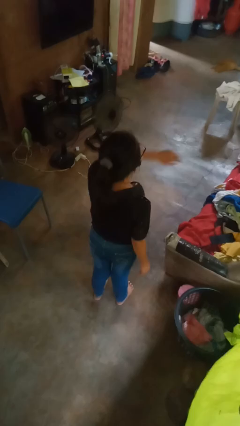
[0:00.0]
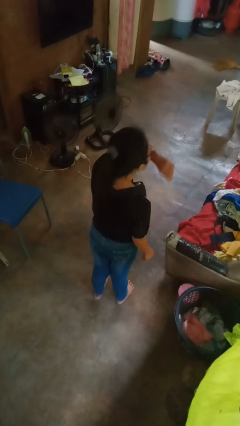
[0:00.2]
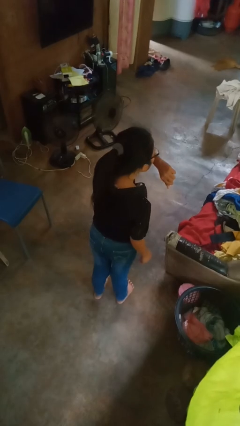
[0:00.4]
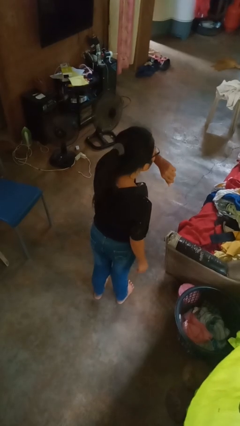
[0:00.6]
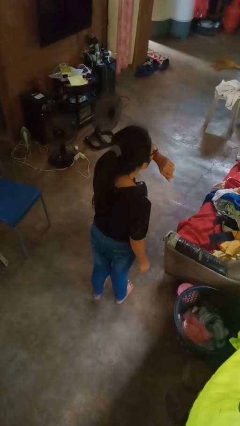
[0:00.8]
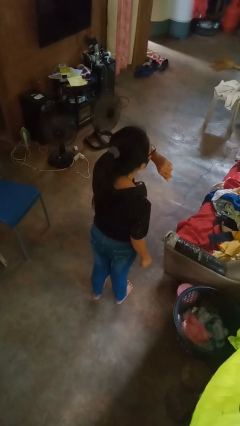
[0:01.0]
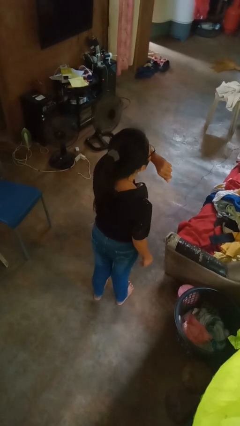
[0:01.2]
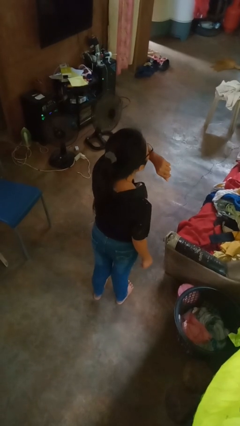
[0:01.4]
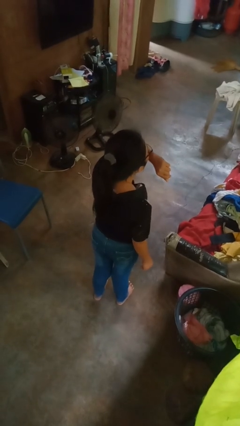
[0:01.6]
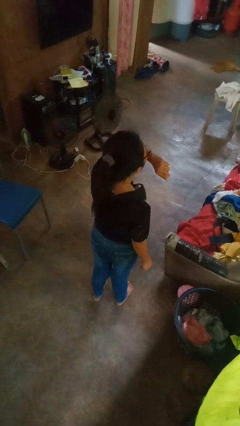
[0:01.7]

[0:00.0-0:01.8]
person sneezes into arm

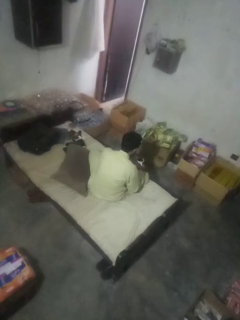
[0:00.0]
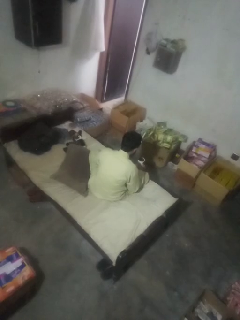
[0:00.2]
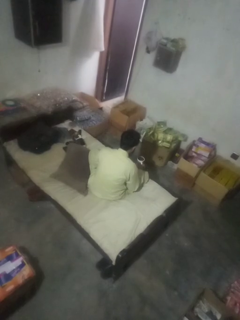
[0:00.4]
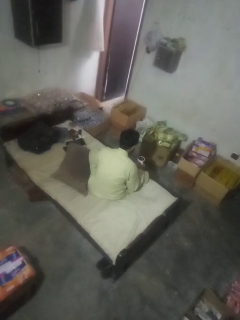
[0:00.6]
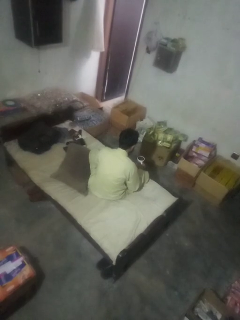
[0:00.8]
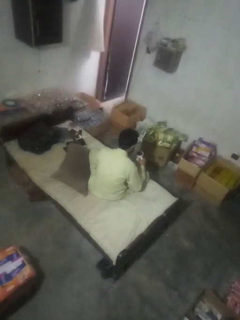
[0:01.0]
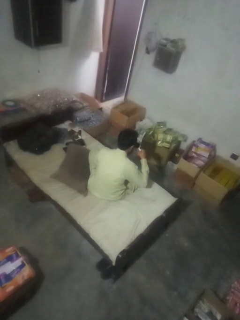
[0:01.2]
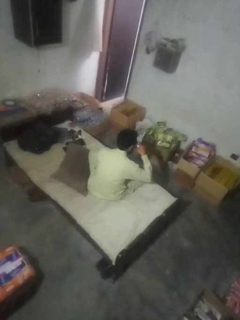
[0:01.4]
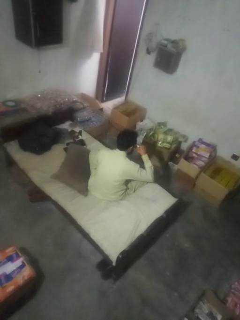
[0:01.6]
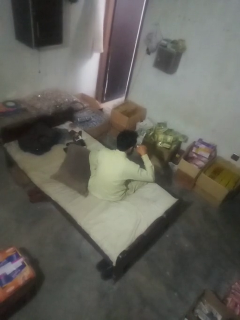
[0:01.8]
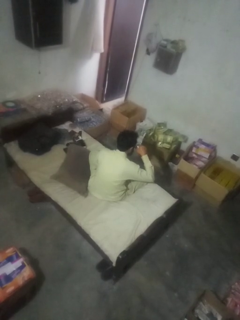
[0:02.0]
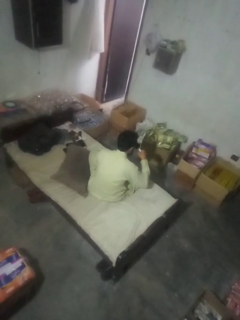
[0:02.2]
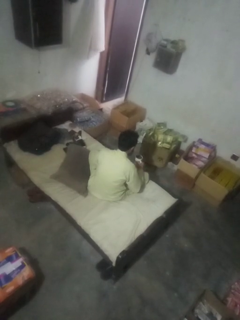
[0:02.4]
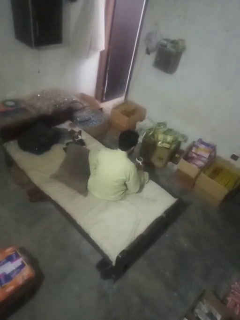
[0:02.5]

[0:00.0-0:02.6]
person drinks from mug

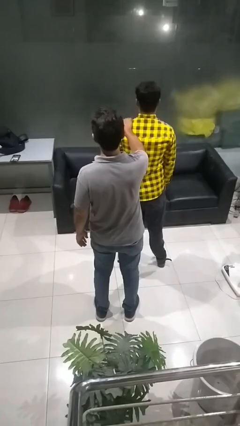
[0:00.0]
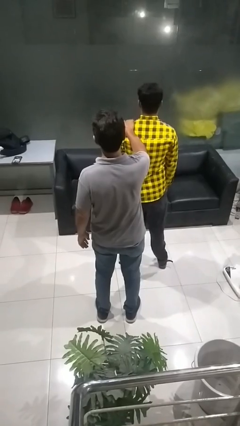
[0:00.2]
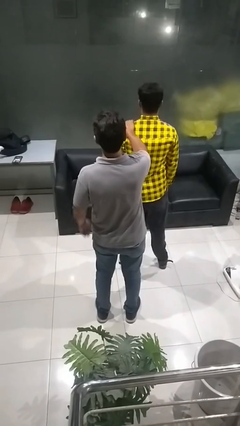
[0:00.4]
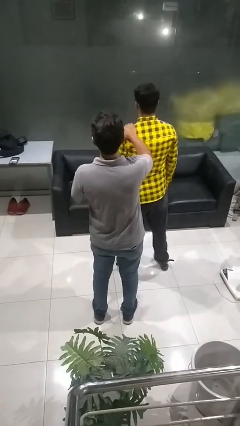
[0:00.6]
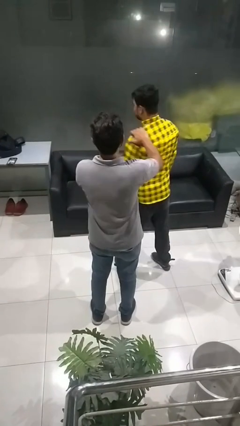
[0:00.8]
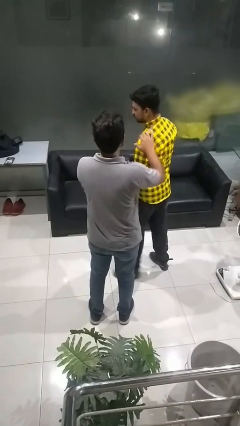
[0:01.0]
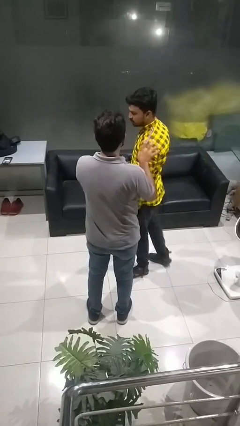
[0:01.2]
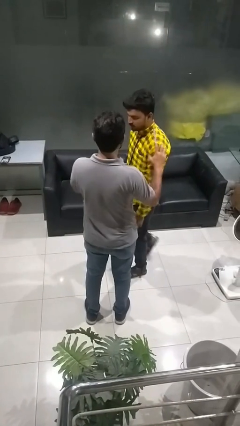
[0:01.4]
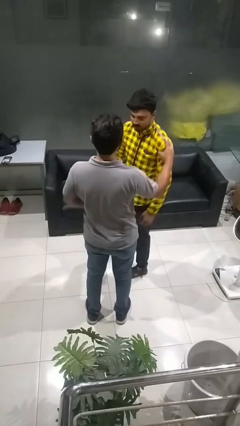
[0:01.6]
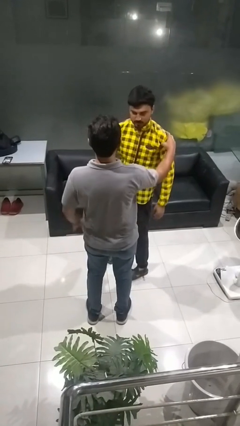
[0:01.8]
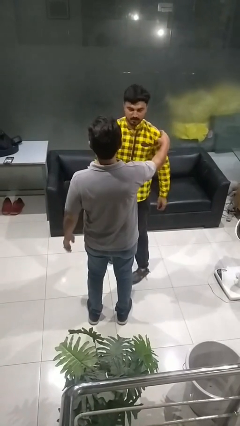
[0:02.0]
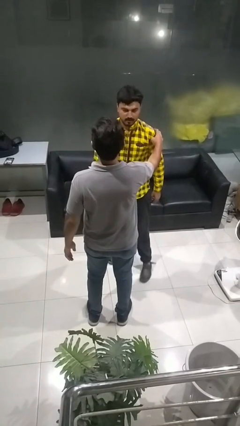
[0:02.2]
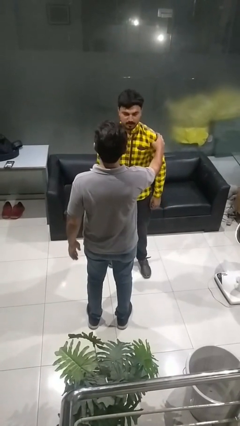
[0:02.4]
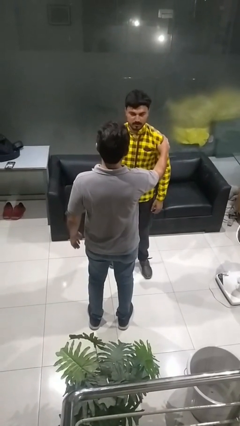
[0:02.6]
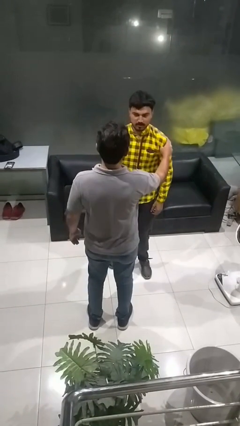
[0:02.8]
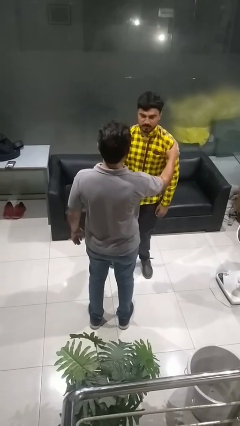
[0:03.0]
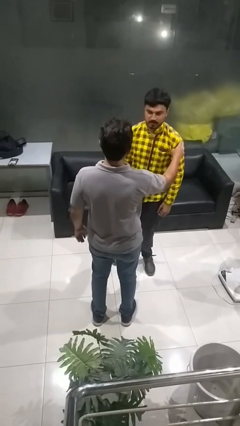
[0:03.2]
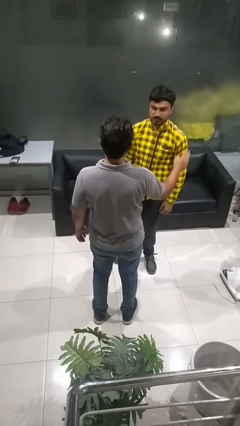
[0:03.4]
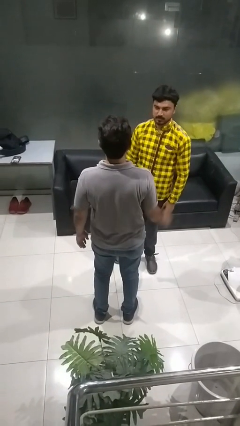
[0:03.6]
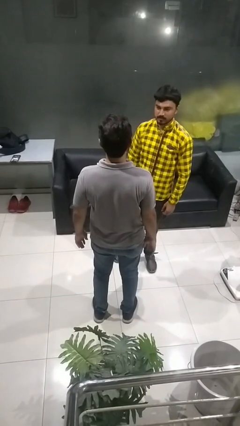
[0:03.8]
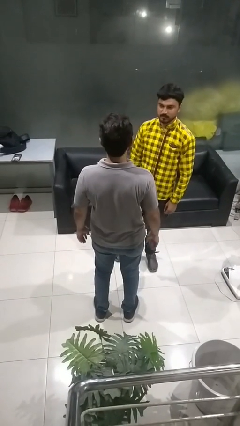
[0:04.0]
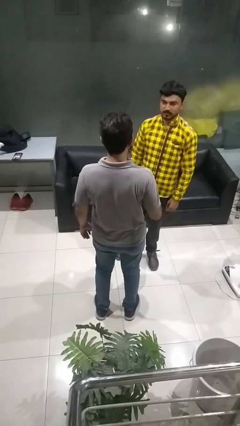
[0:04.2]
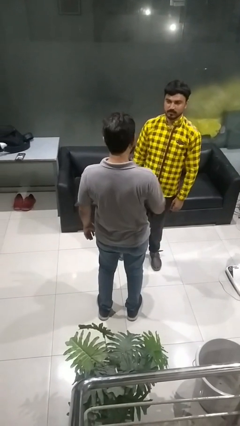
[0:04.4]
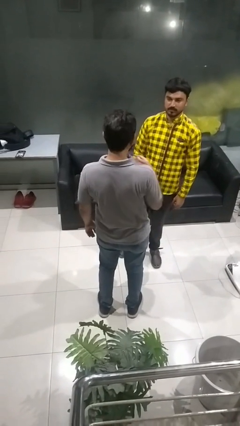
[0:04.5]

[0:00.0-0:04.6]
person spins person around

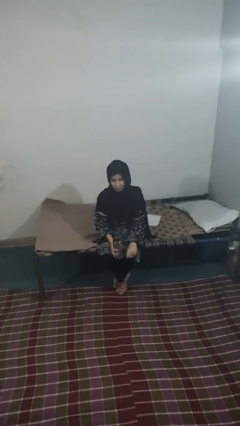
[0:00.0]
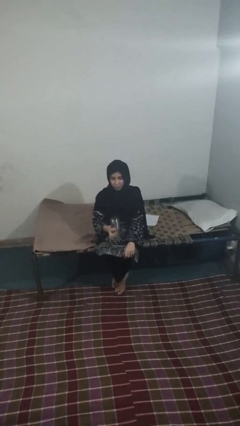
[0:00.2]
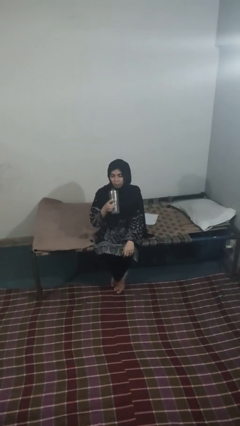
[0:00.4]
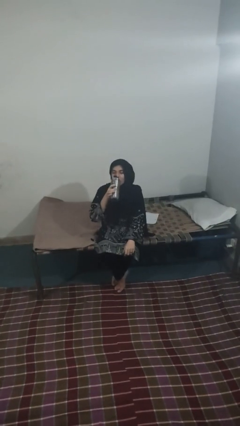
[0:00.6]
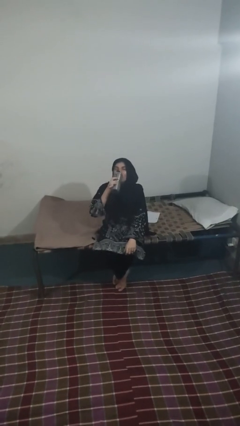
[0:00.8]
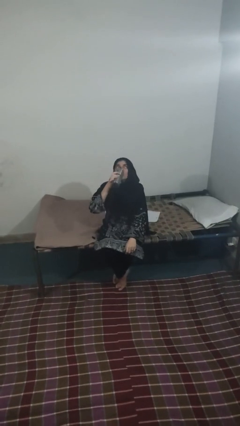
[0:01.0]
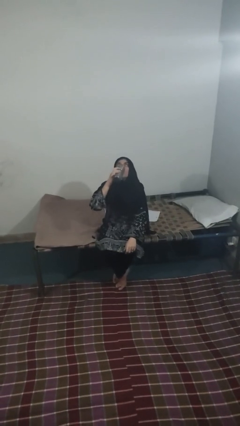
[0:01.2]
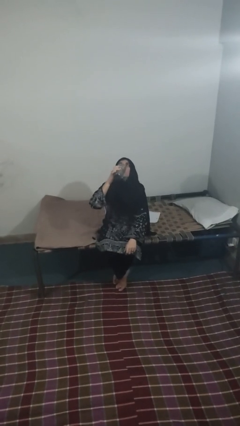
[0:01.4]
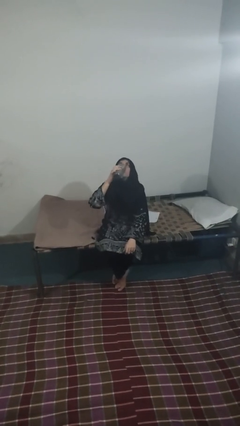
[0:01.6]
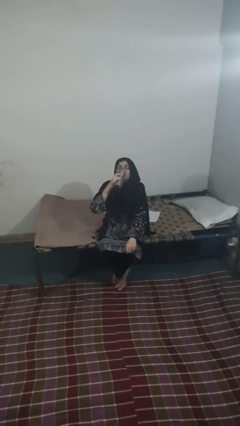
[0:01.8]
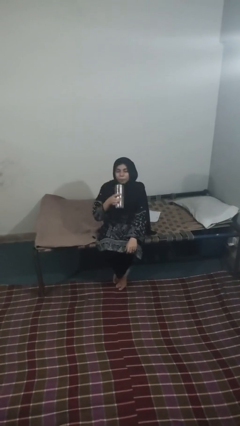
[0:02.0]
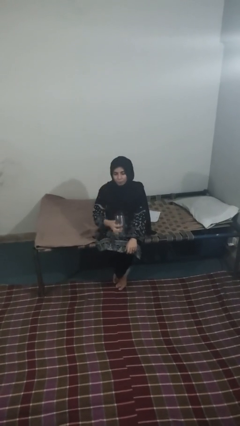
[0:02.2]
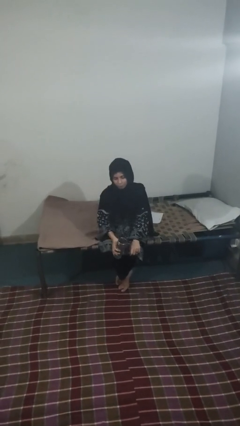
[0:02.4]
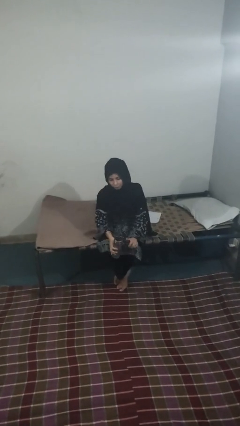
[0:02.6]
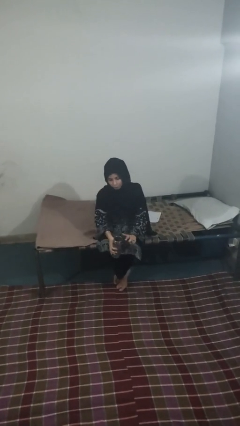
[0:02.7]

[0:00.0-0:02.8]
person drinks from beverage can

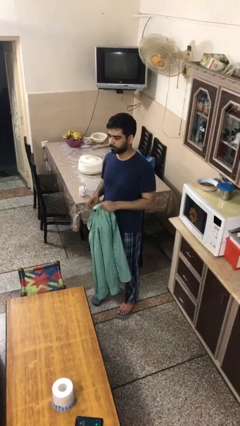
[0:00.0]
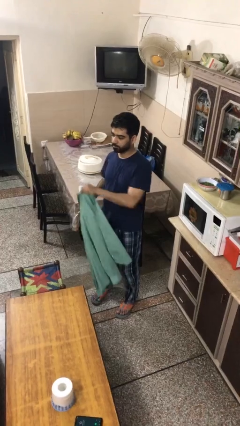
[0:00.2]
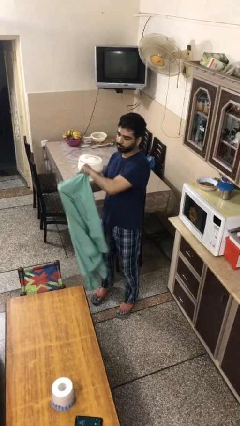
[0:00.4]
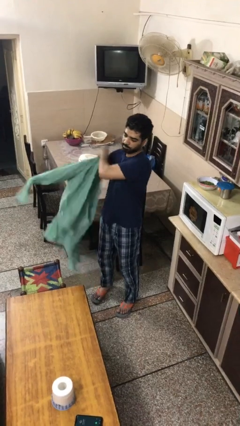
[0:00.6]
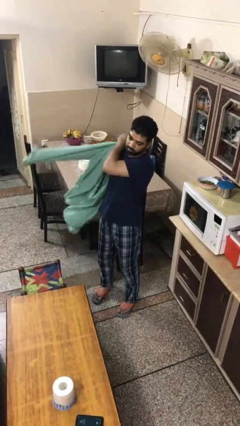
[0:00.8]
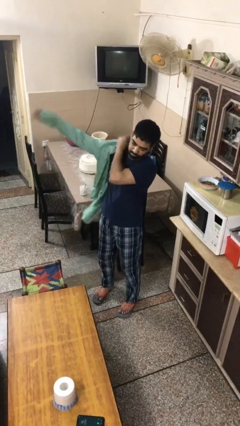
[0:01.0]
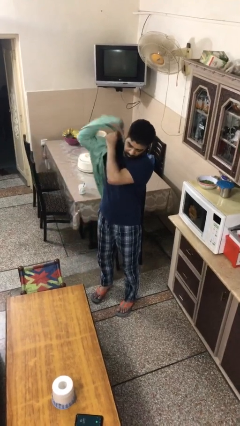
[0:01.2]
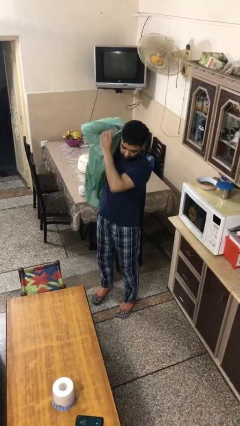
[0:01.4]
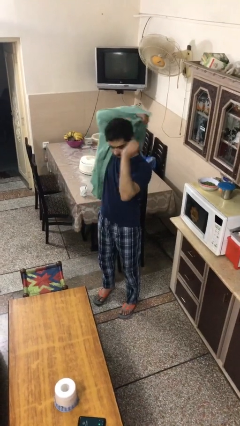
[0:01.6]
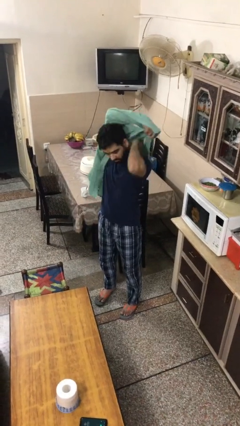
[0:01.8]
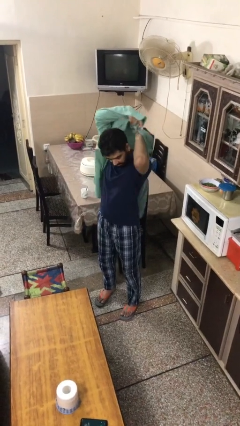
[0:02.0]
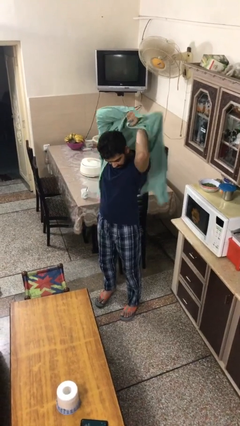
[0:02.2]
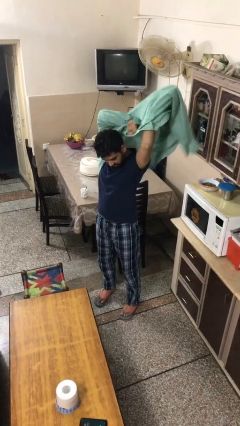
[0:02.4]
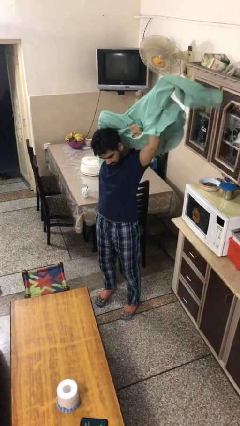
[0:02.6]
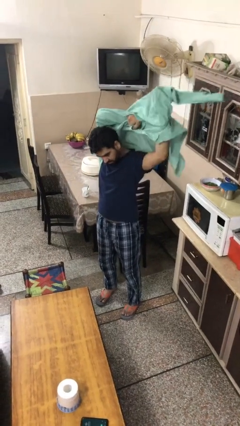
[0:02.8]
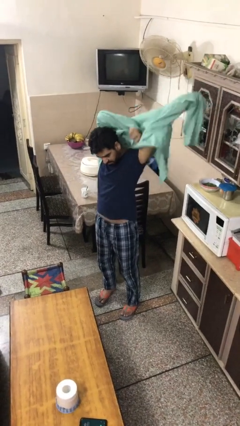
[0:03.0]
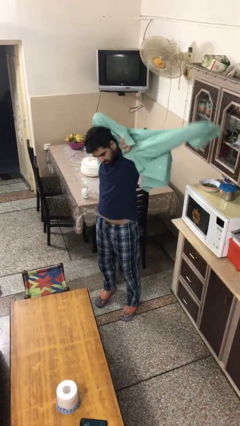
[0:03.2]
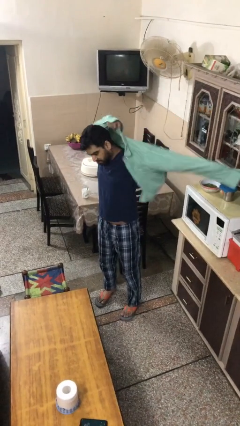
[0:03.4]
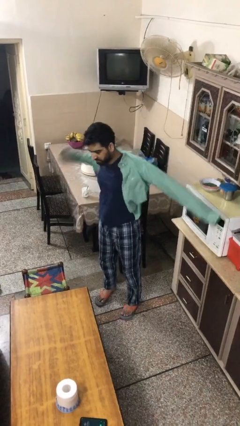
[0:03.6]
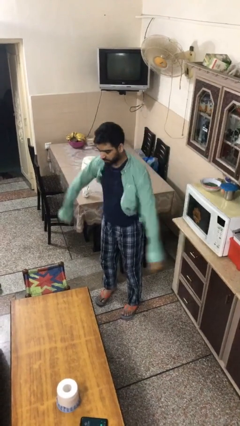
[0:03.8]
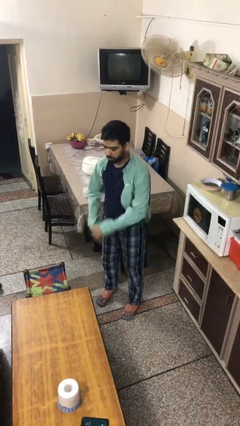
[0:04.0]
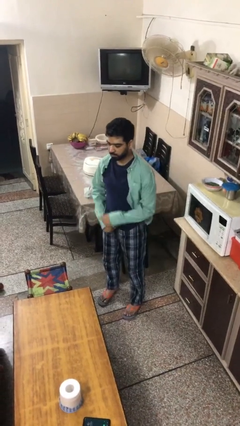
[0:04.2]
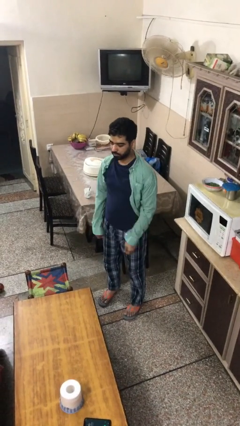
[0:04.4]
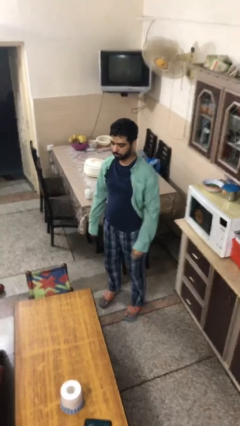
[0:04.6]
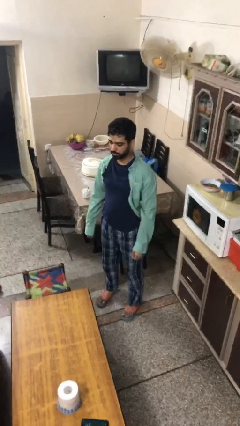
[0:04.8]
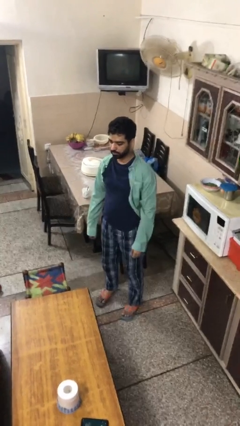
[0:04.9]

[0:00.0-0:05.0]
person puts on shirt

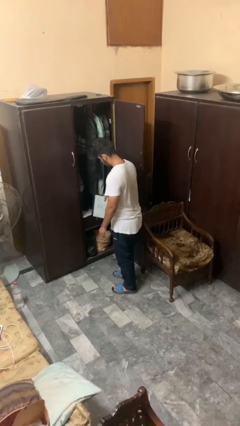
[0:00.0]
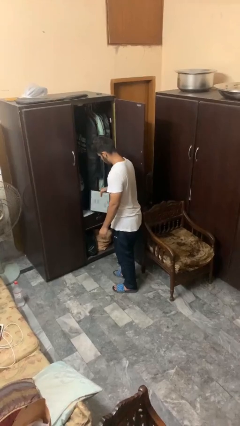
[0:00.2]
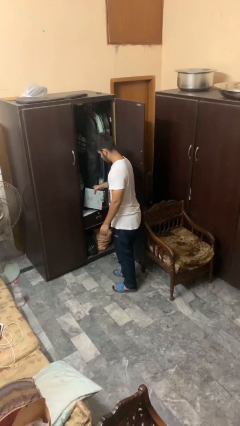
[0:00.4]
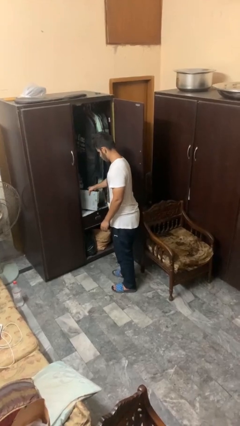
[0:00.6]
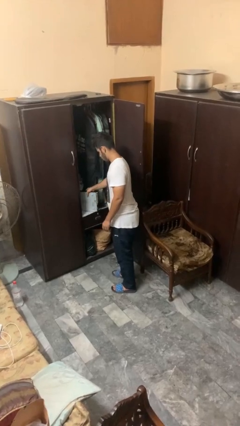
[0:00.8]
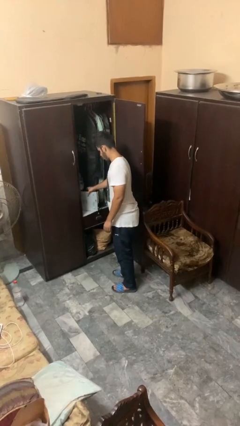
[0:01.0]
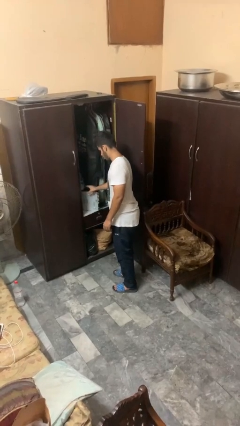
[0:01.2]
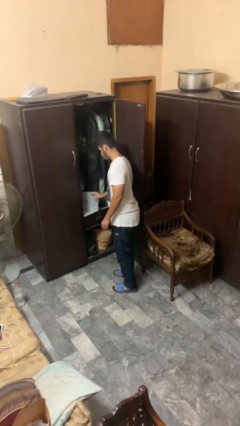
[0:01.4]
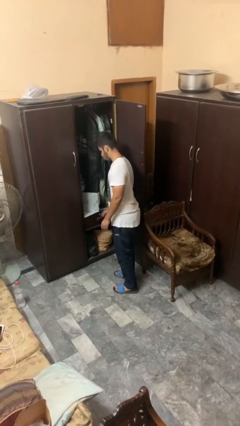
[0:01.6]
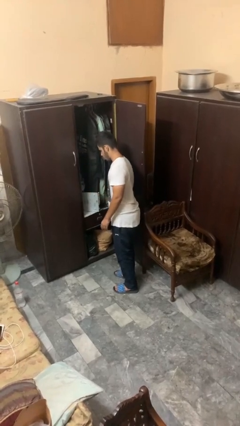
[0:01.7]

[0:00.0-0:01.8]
person puts down object on countertop
